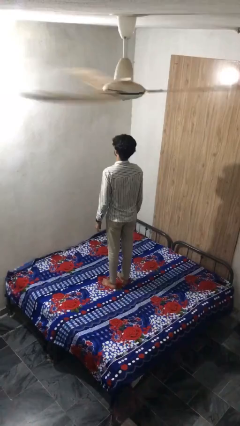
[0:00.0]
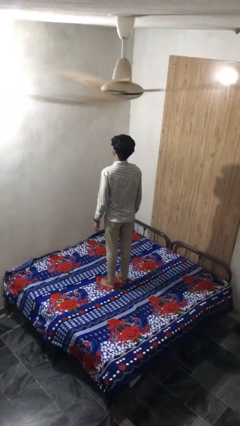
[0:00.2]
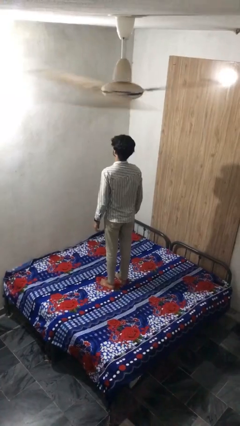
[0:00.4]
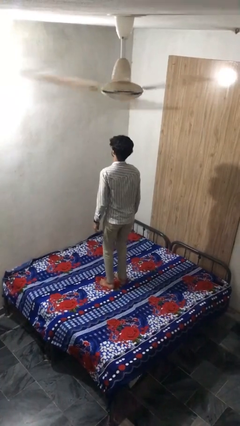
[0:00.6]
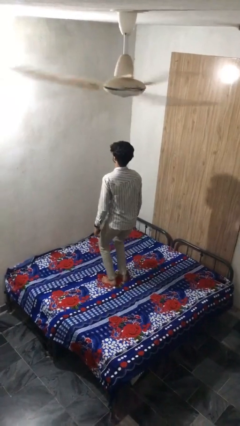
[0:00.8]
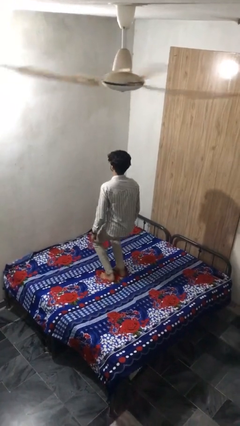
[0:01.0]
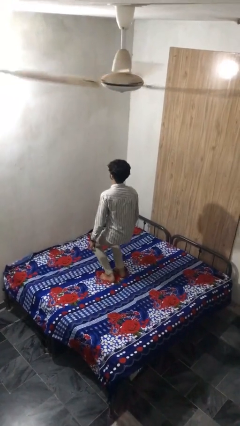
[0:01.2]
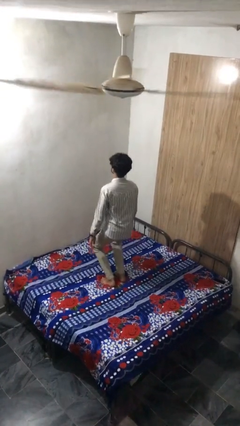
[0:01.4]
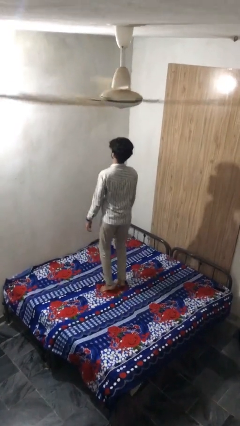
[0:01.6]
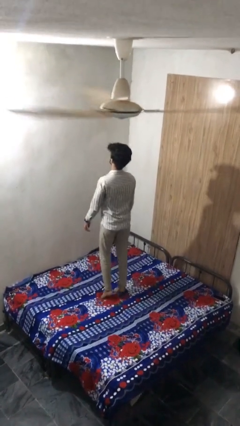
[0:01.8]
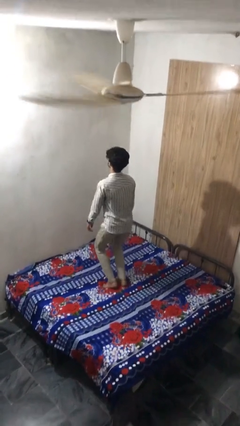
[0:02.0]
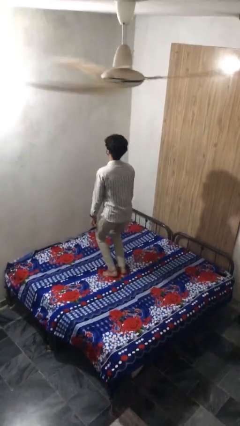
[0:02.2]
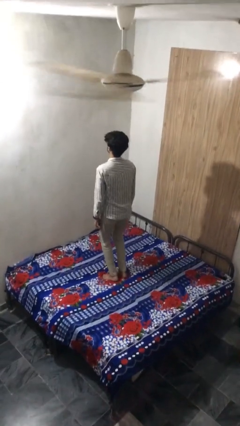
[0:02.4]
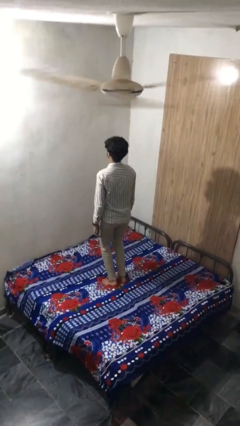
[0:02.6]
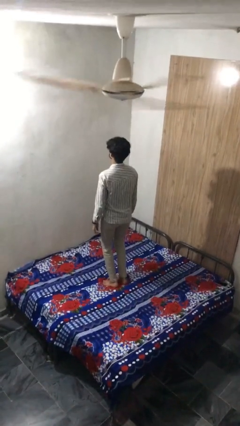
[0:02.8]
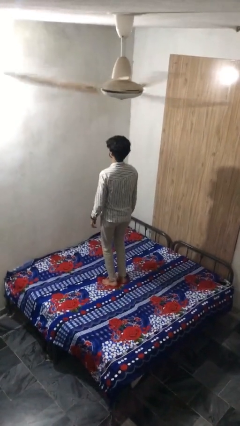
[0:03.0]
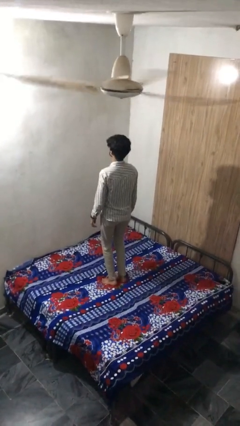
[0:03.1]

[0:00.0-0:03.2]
person jumps on bed

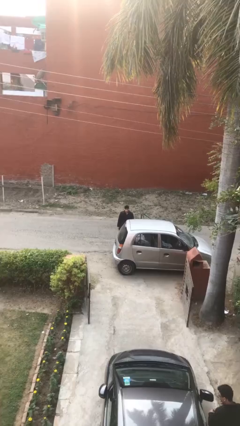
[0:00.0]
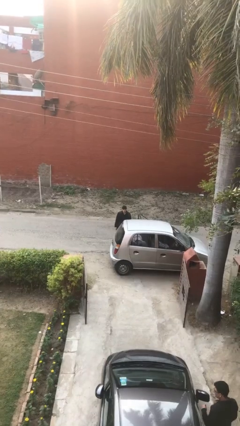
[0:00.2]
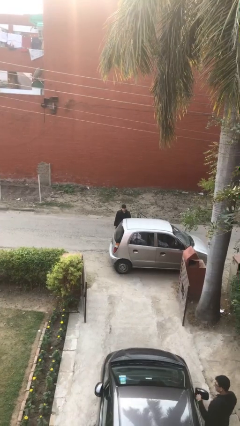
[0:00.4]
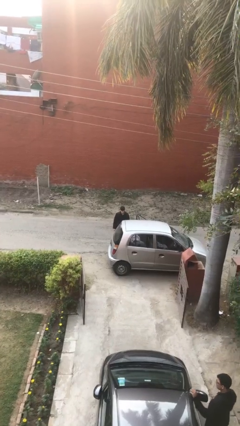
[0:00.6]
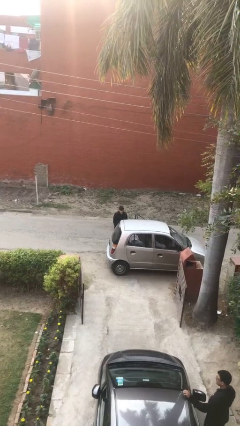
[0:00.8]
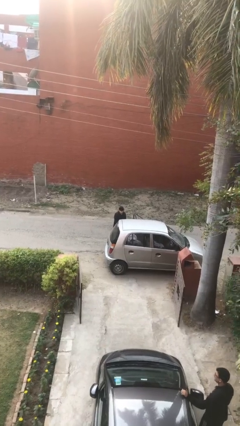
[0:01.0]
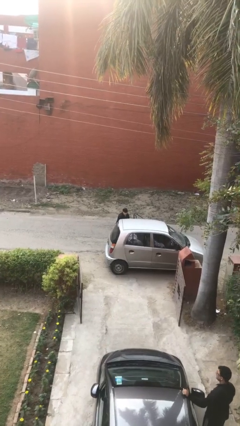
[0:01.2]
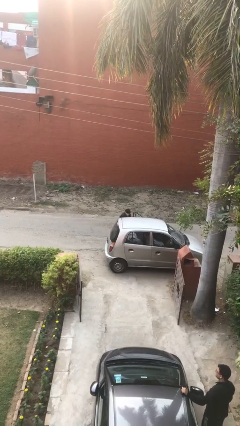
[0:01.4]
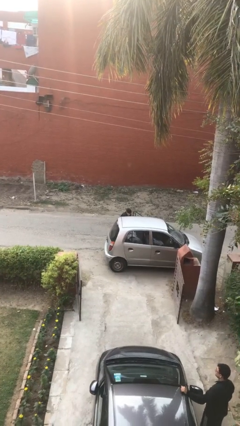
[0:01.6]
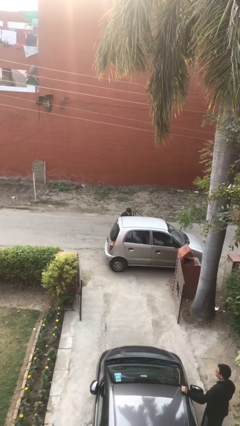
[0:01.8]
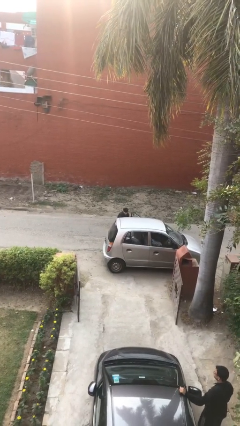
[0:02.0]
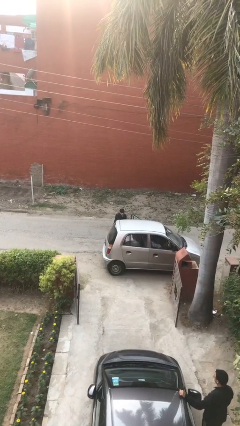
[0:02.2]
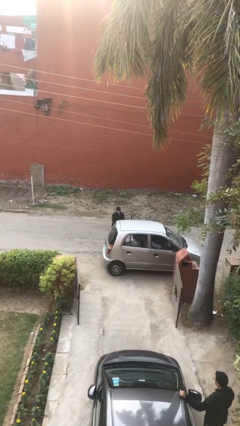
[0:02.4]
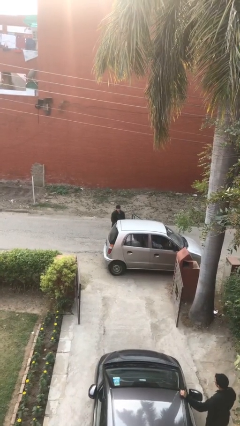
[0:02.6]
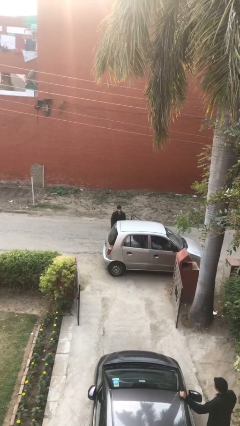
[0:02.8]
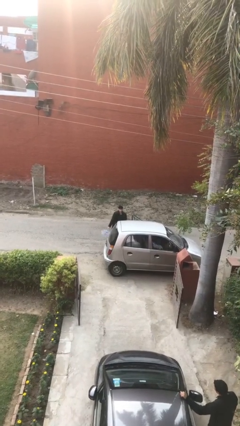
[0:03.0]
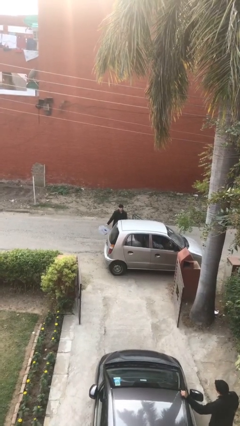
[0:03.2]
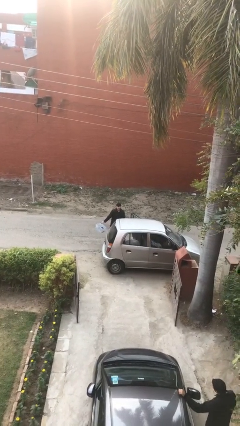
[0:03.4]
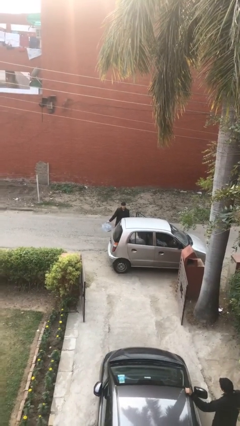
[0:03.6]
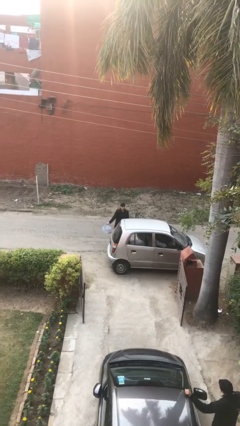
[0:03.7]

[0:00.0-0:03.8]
person unloads car

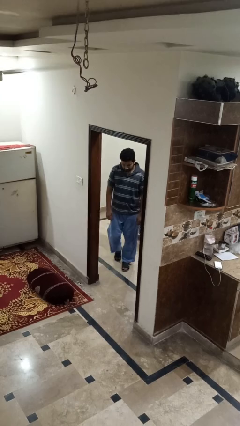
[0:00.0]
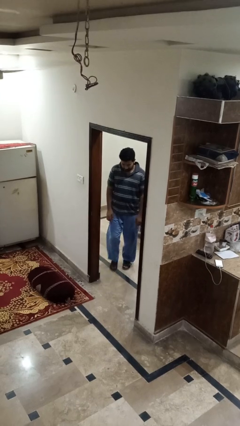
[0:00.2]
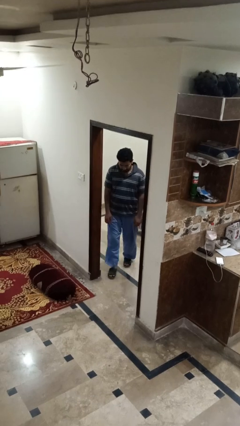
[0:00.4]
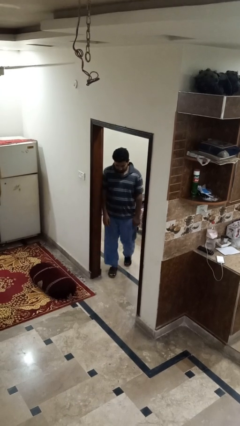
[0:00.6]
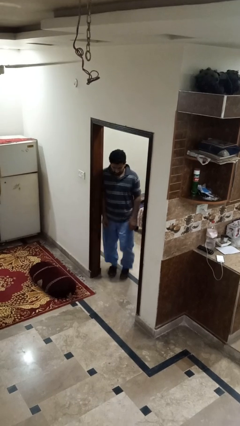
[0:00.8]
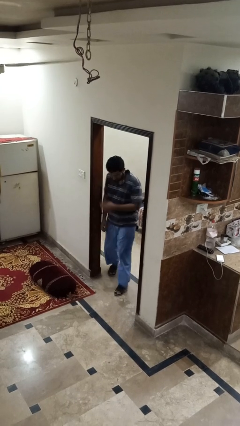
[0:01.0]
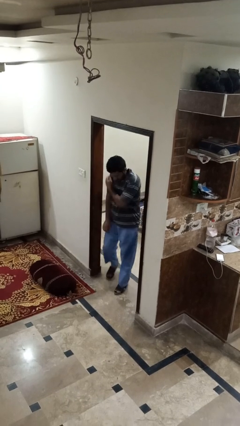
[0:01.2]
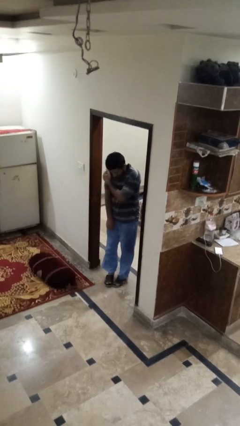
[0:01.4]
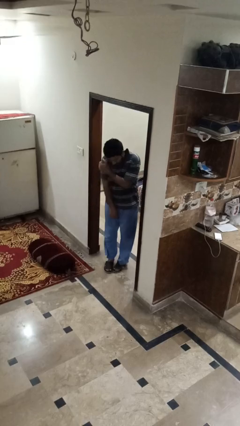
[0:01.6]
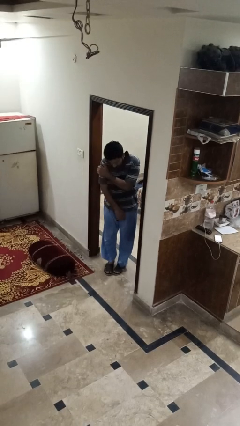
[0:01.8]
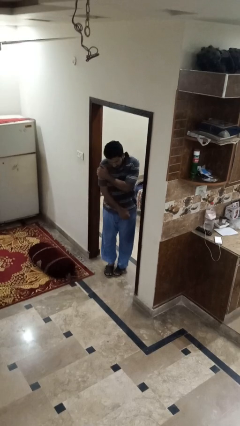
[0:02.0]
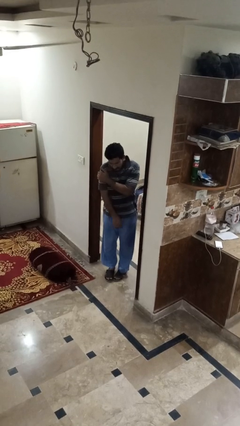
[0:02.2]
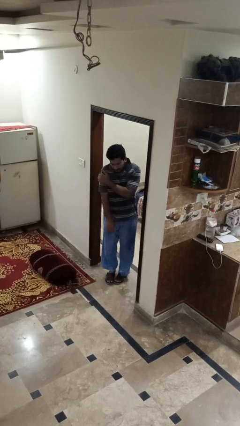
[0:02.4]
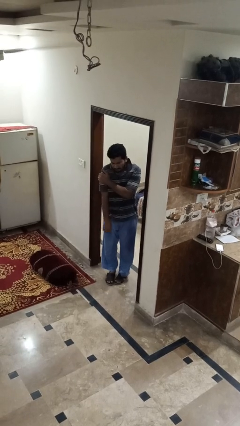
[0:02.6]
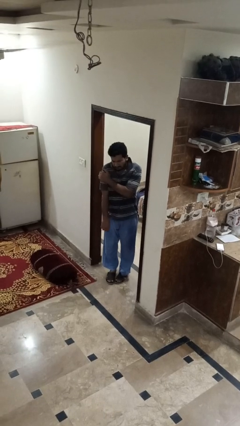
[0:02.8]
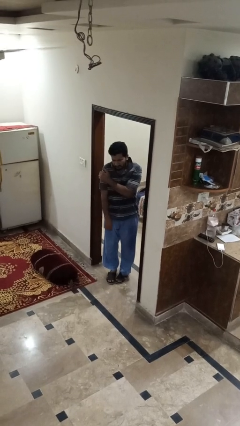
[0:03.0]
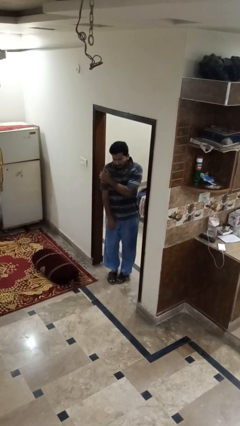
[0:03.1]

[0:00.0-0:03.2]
person bumps into wall

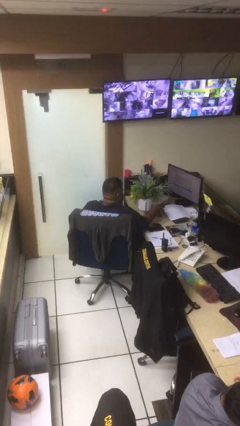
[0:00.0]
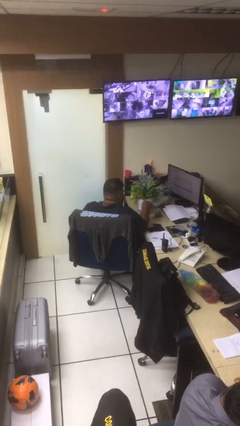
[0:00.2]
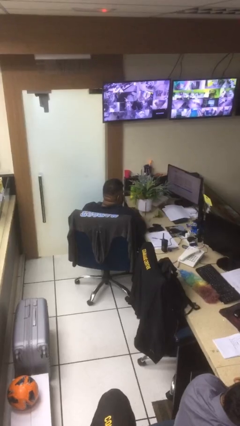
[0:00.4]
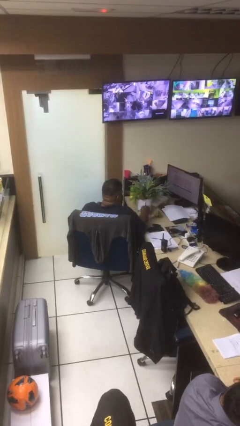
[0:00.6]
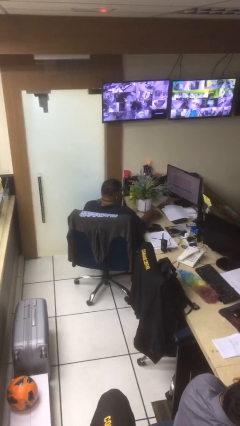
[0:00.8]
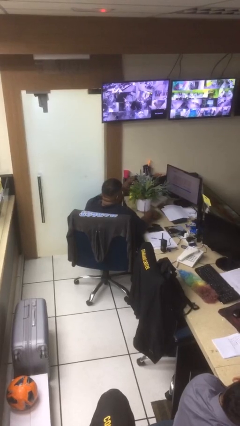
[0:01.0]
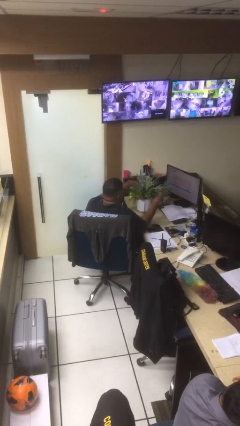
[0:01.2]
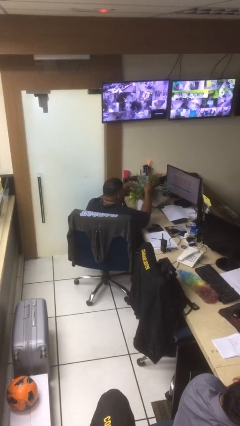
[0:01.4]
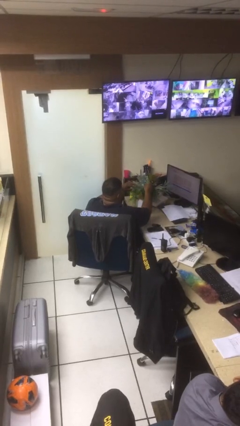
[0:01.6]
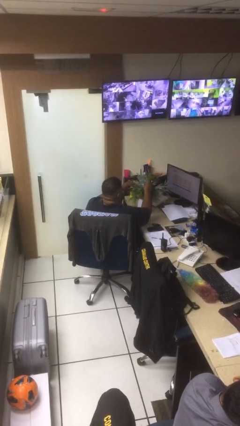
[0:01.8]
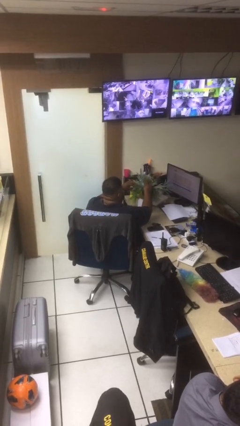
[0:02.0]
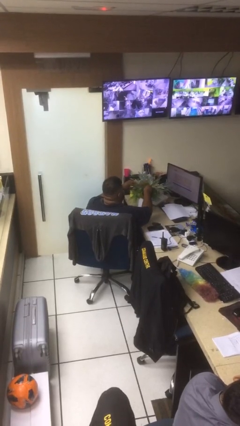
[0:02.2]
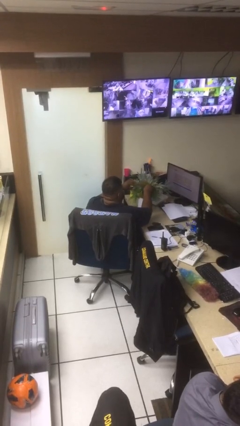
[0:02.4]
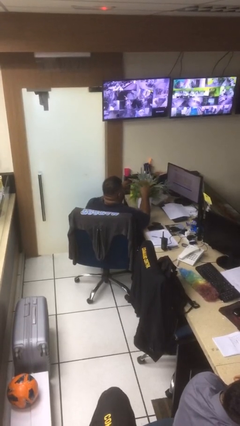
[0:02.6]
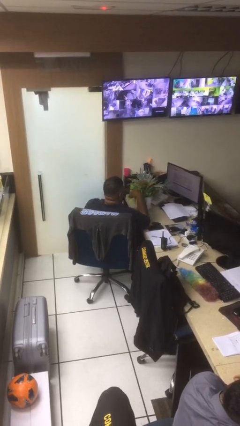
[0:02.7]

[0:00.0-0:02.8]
person arranges flowers in vase

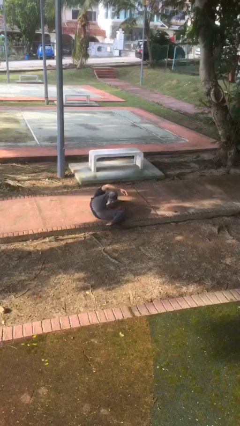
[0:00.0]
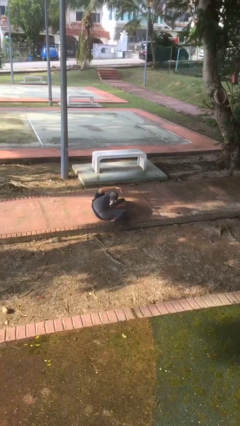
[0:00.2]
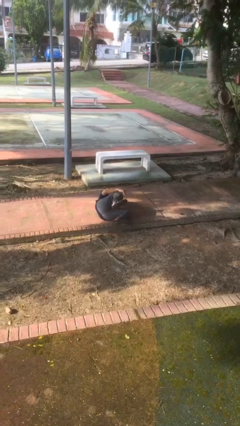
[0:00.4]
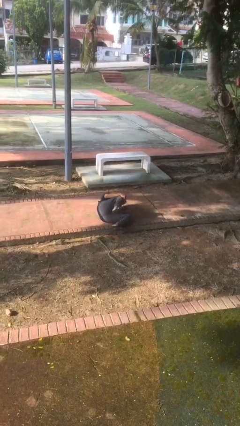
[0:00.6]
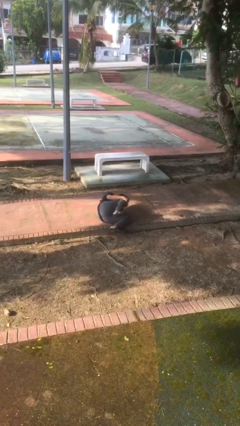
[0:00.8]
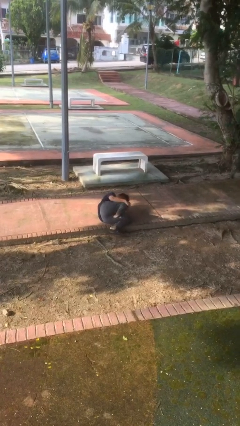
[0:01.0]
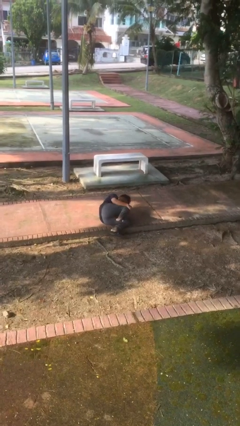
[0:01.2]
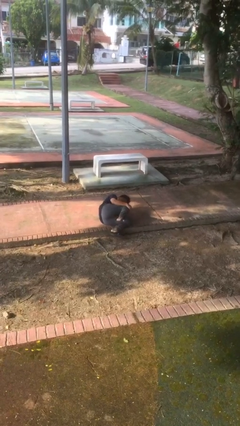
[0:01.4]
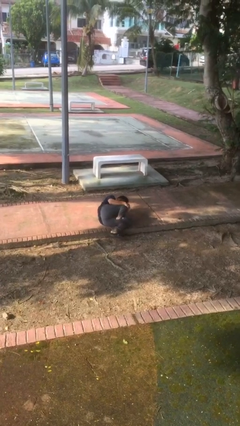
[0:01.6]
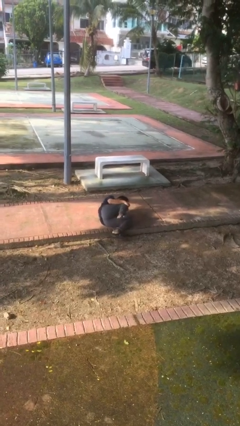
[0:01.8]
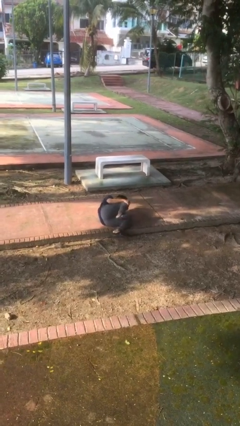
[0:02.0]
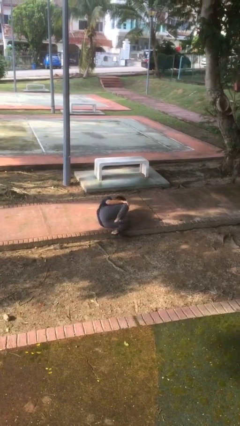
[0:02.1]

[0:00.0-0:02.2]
person lies down on floor

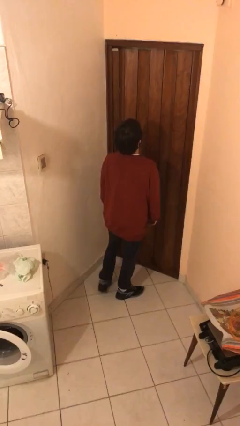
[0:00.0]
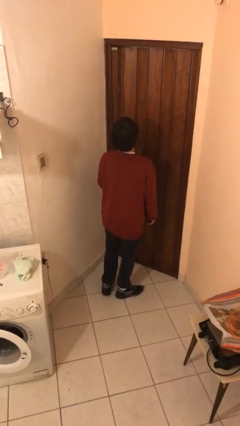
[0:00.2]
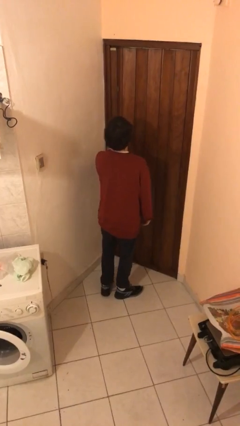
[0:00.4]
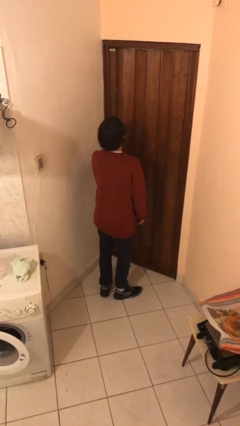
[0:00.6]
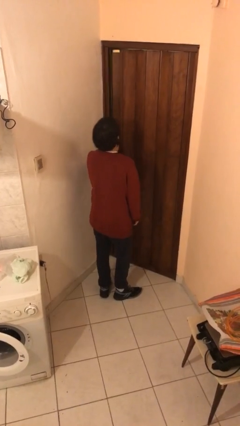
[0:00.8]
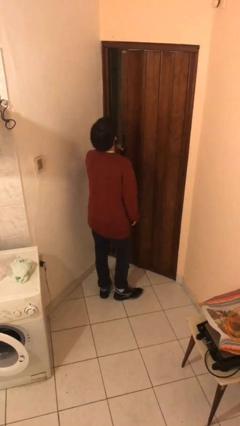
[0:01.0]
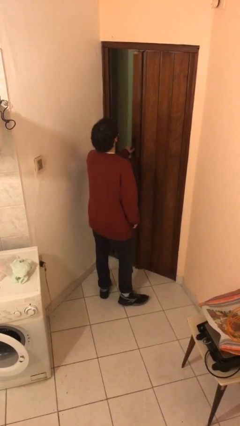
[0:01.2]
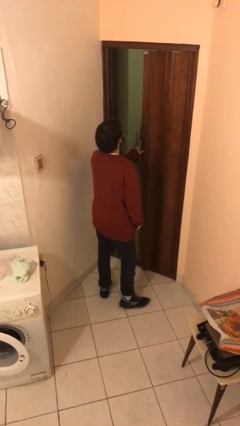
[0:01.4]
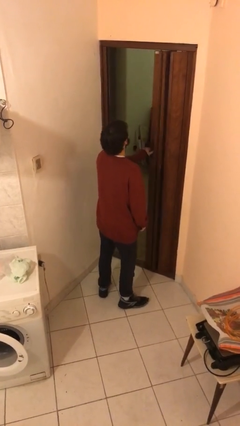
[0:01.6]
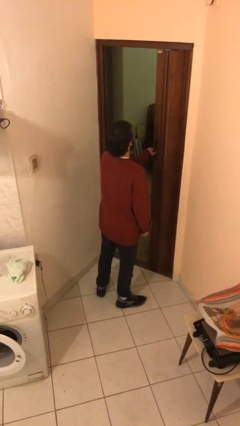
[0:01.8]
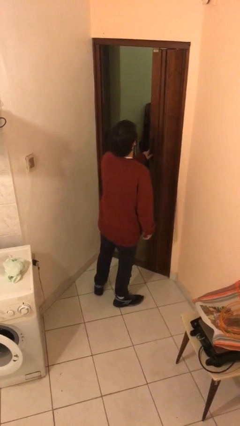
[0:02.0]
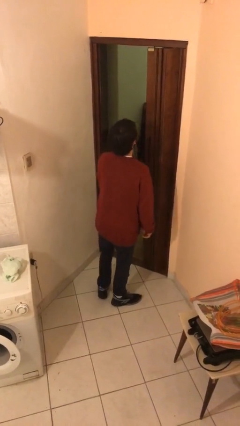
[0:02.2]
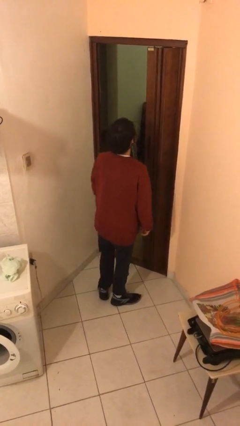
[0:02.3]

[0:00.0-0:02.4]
person opens sliding door
